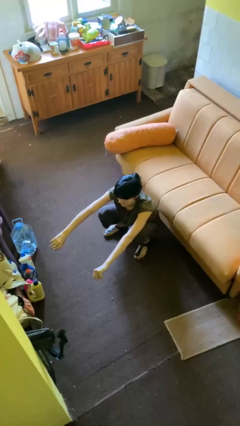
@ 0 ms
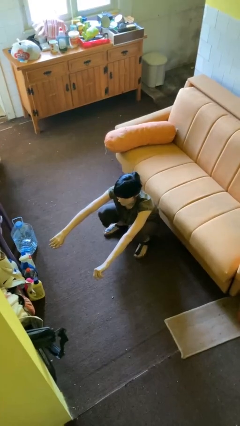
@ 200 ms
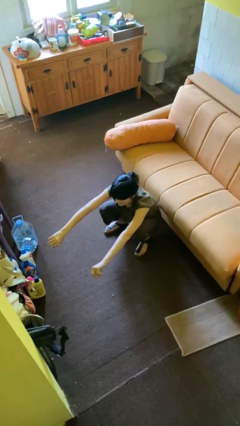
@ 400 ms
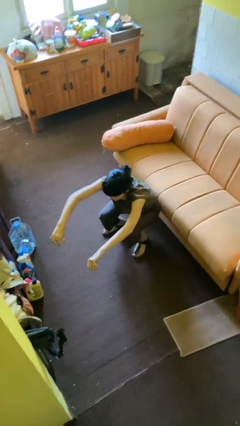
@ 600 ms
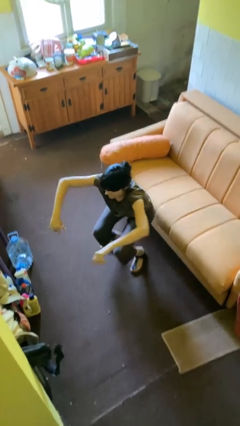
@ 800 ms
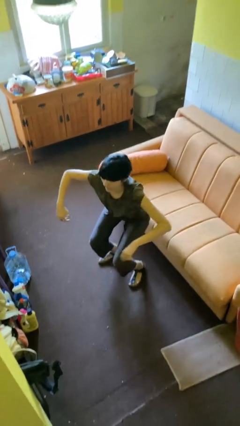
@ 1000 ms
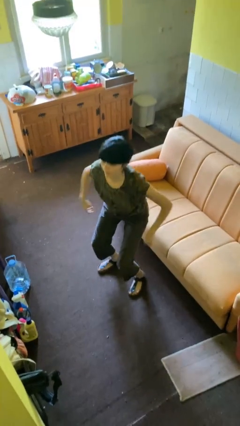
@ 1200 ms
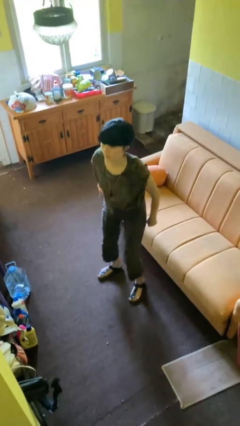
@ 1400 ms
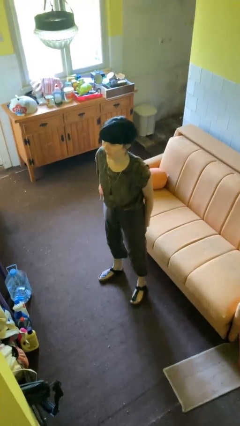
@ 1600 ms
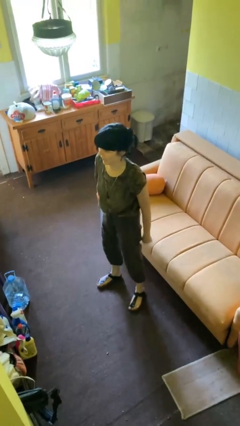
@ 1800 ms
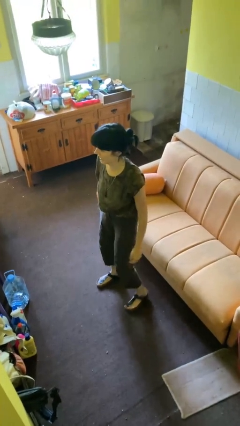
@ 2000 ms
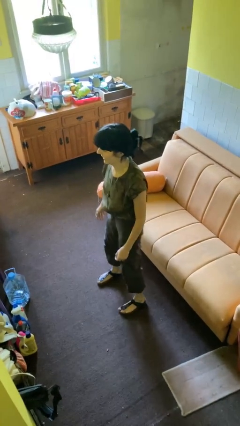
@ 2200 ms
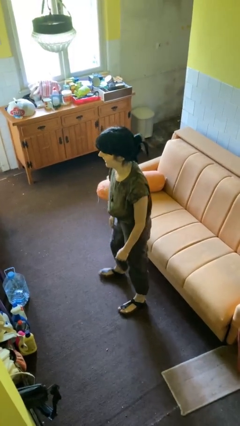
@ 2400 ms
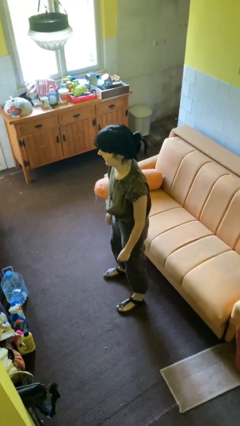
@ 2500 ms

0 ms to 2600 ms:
person stands up

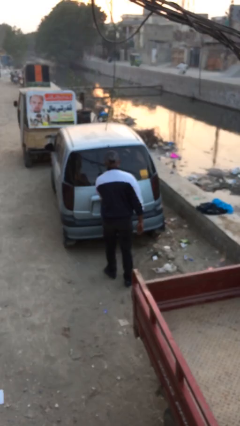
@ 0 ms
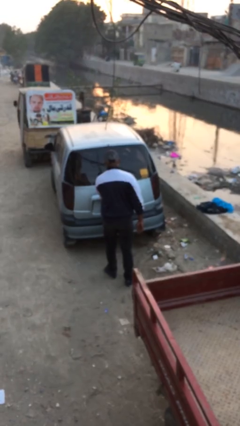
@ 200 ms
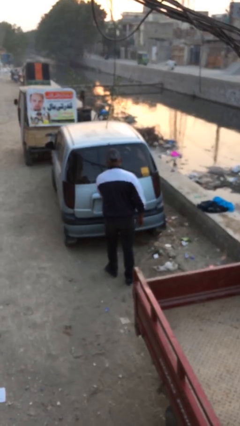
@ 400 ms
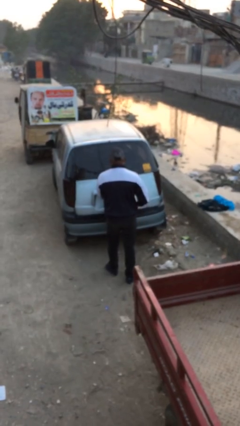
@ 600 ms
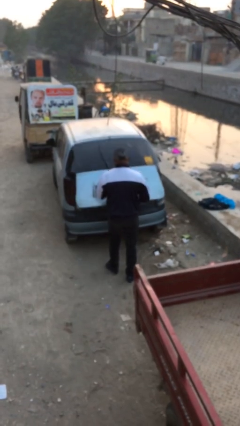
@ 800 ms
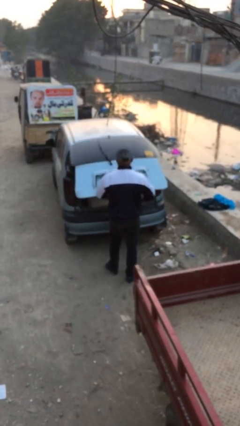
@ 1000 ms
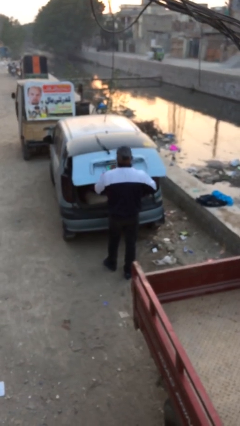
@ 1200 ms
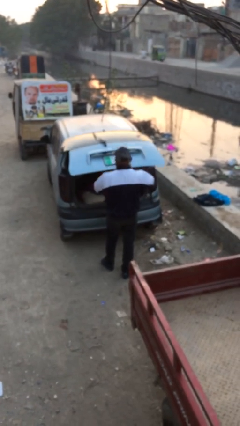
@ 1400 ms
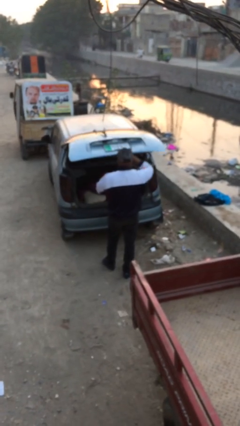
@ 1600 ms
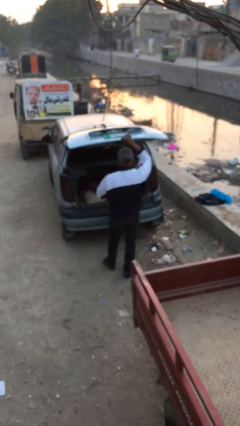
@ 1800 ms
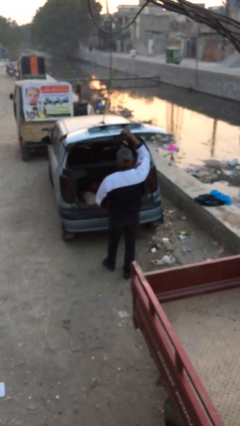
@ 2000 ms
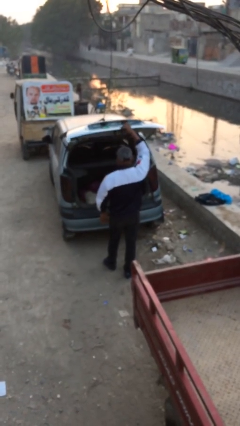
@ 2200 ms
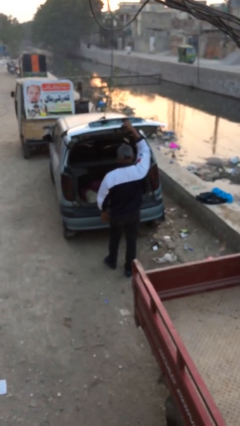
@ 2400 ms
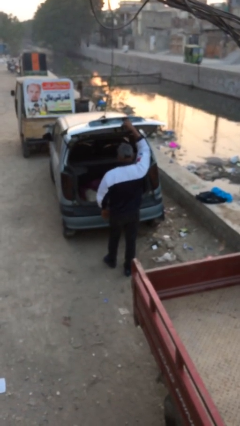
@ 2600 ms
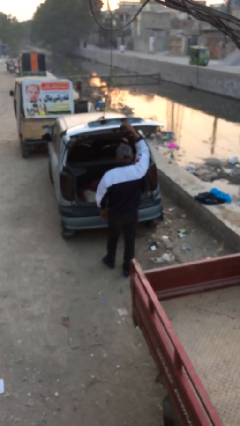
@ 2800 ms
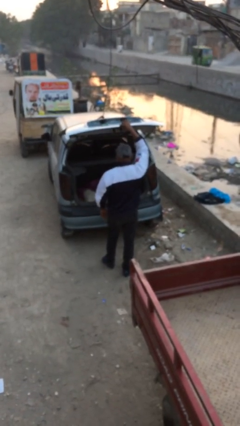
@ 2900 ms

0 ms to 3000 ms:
person opens car trunk

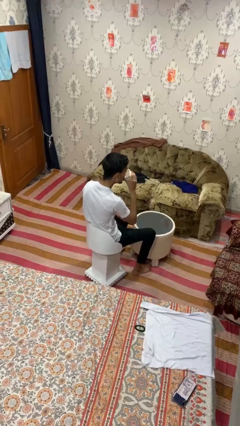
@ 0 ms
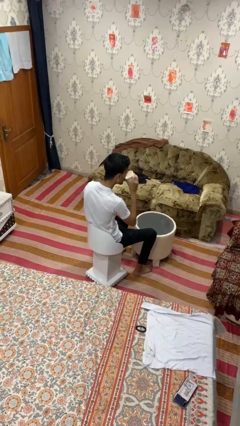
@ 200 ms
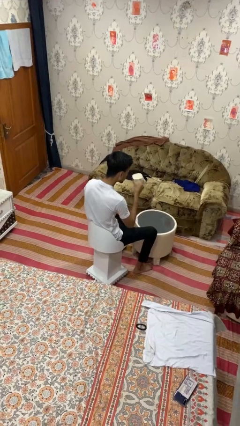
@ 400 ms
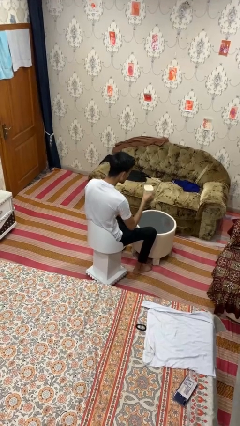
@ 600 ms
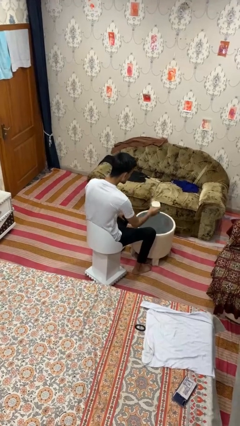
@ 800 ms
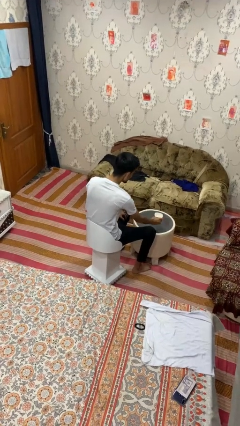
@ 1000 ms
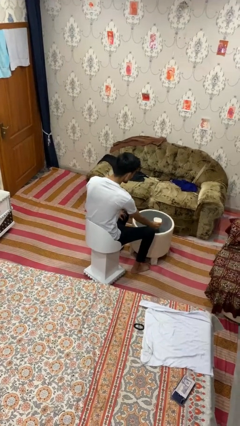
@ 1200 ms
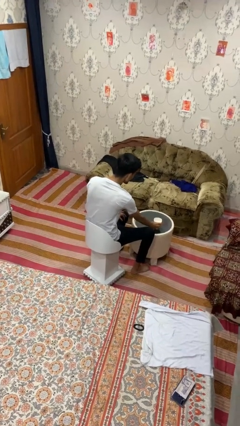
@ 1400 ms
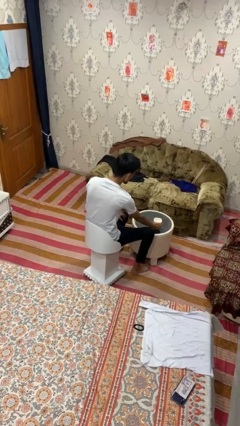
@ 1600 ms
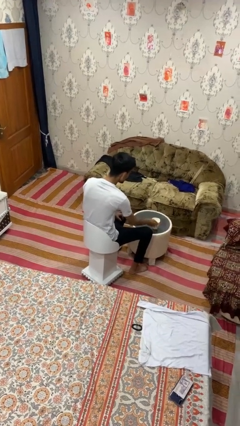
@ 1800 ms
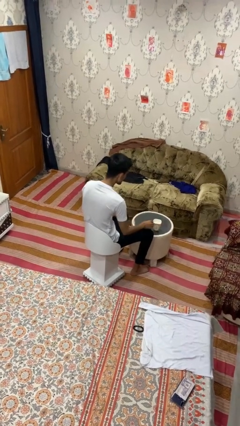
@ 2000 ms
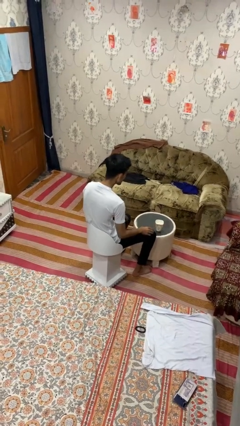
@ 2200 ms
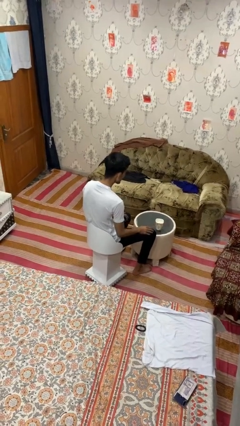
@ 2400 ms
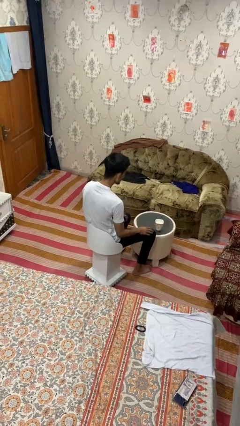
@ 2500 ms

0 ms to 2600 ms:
person puts down object on table

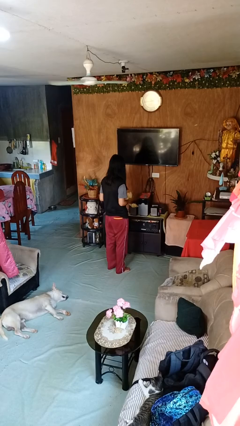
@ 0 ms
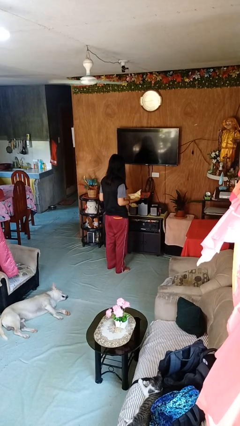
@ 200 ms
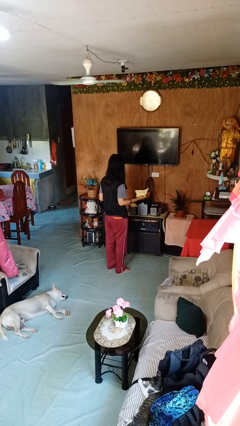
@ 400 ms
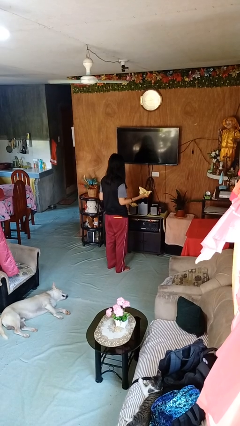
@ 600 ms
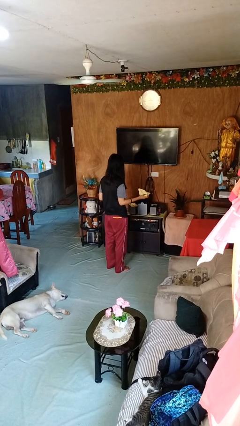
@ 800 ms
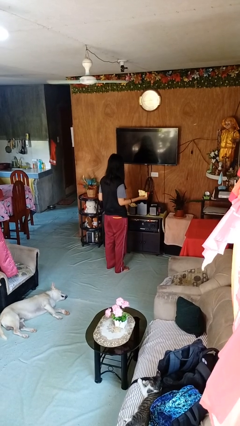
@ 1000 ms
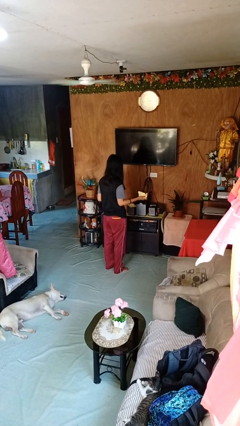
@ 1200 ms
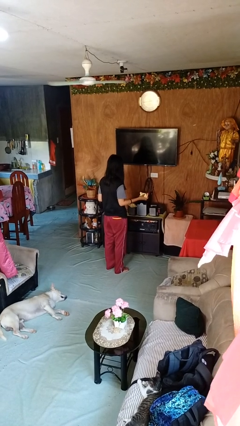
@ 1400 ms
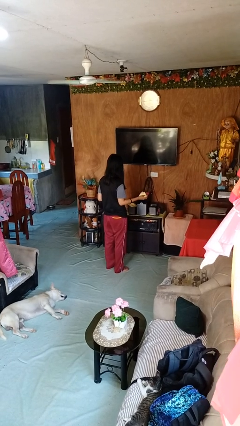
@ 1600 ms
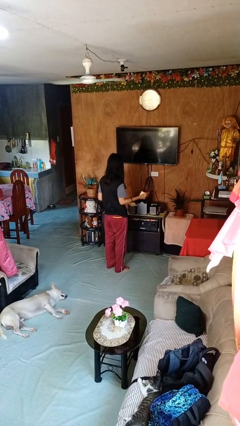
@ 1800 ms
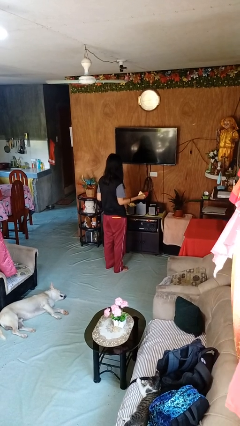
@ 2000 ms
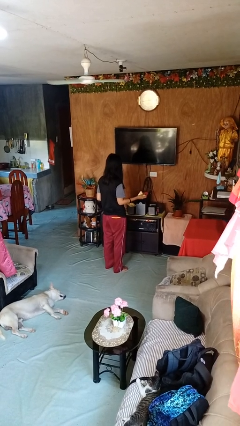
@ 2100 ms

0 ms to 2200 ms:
person crumples paper

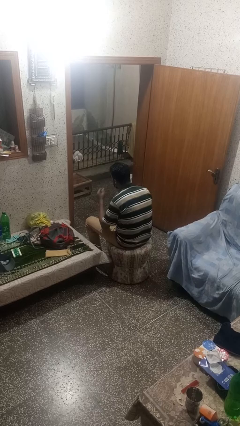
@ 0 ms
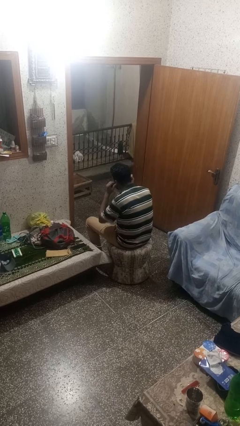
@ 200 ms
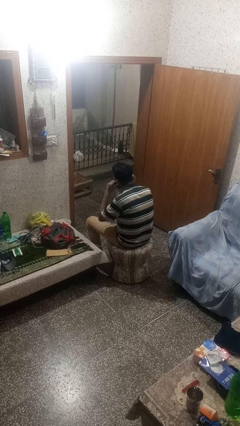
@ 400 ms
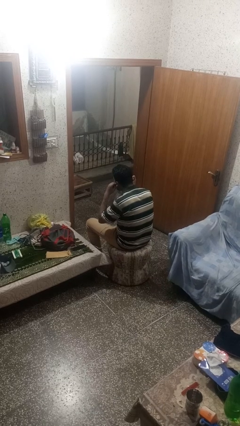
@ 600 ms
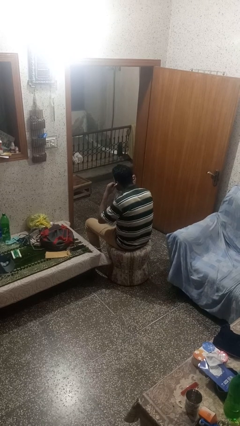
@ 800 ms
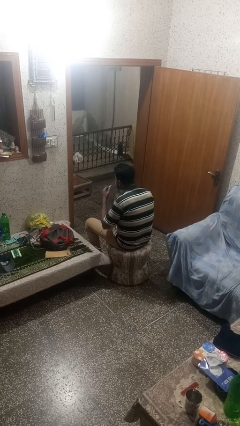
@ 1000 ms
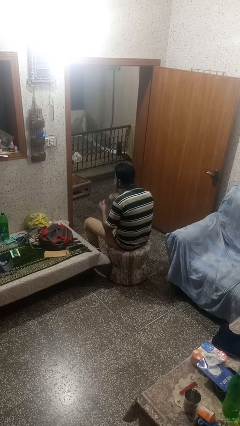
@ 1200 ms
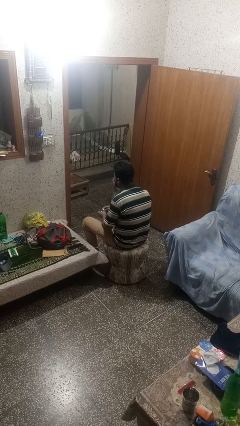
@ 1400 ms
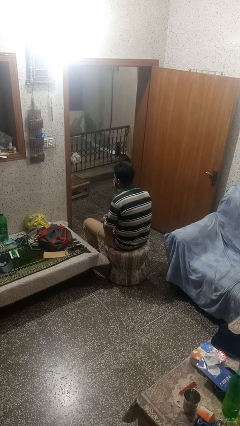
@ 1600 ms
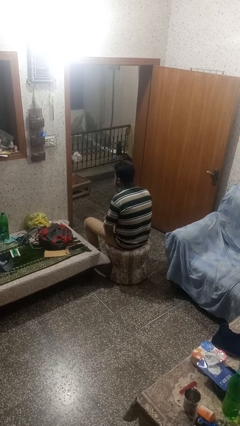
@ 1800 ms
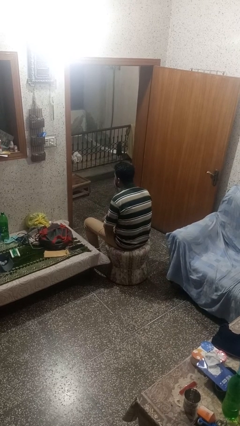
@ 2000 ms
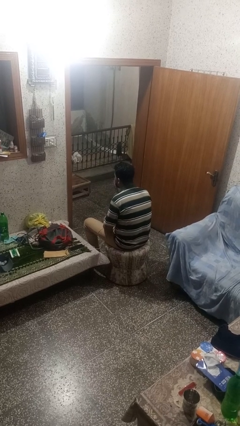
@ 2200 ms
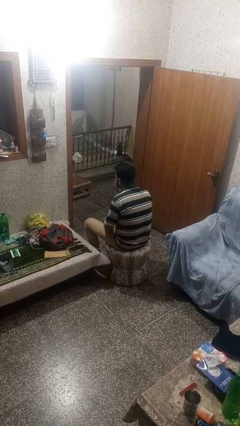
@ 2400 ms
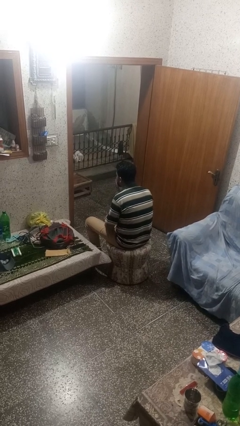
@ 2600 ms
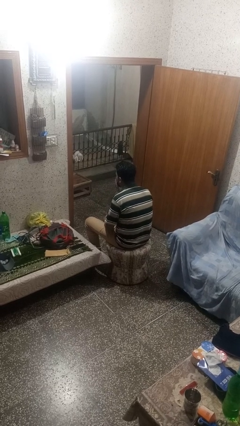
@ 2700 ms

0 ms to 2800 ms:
person takes off headphones

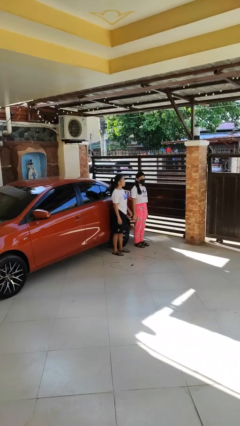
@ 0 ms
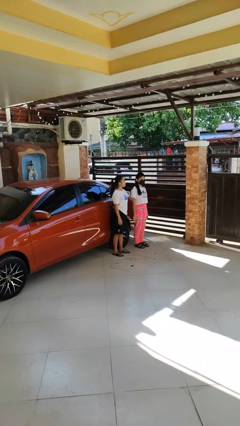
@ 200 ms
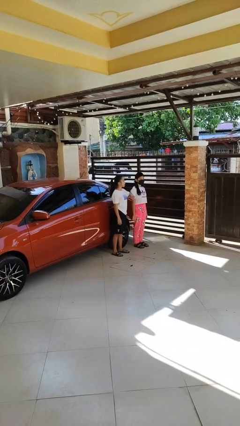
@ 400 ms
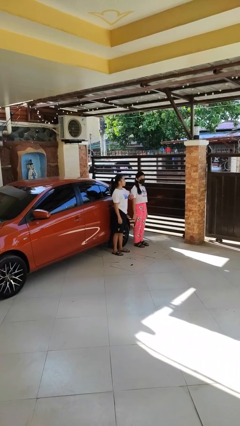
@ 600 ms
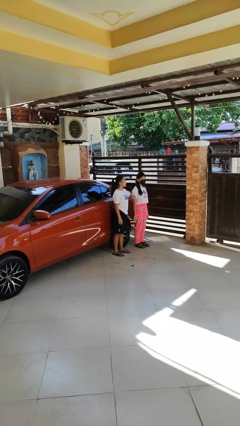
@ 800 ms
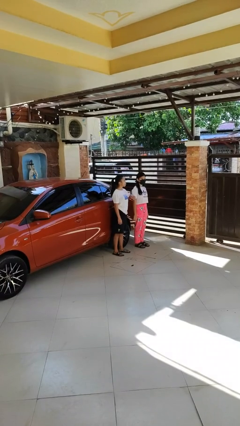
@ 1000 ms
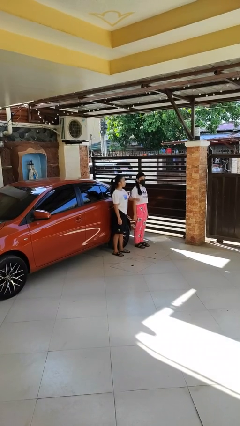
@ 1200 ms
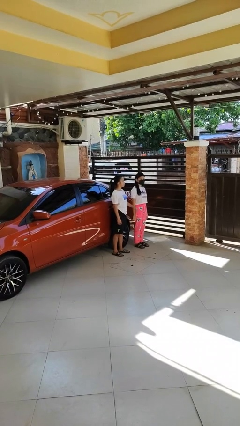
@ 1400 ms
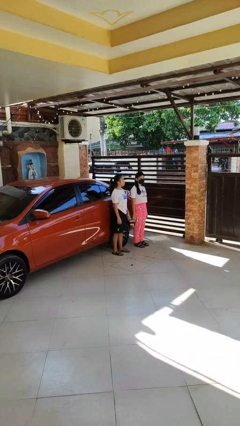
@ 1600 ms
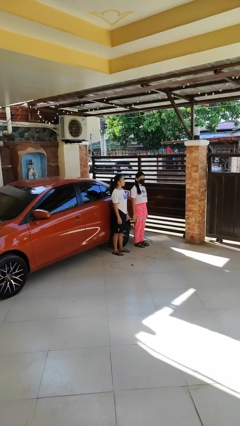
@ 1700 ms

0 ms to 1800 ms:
person nudges person with elbow

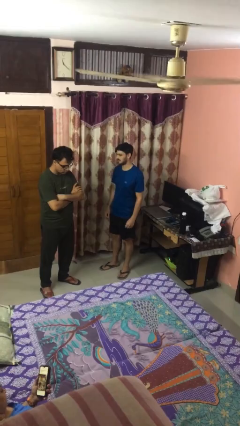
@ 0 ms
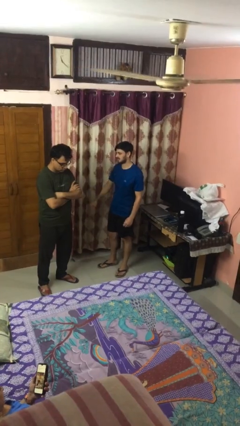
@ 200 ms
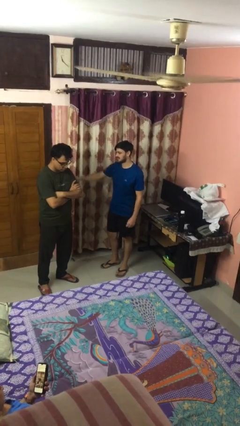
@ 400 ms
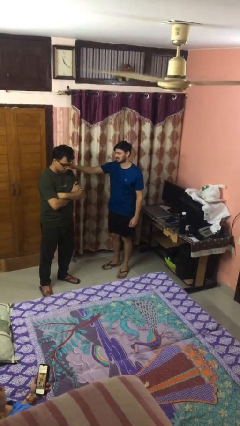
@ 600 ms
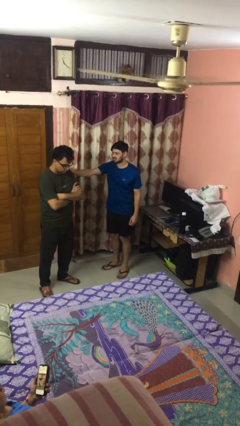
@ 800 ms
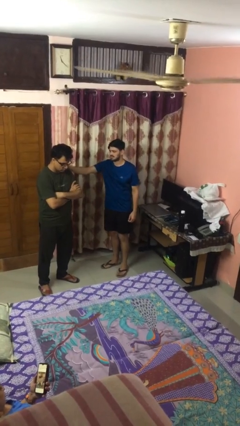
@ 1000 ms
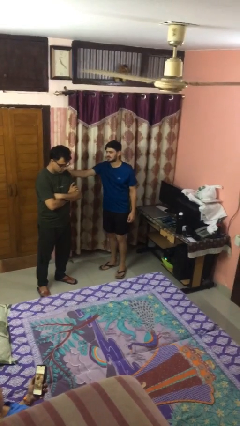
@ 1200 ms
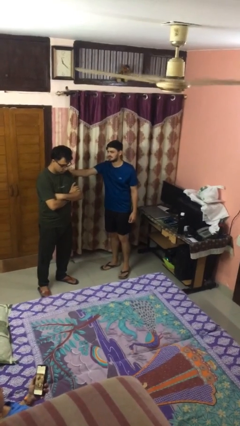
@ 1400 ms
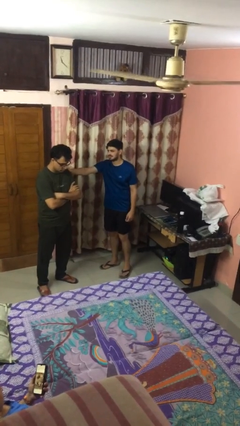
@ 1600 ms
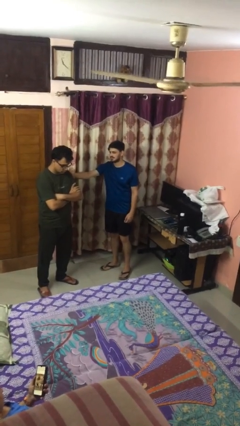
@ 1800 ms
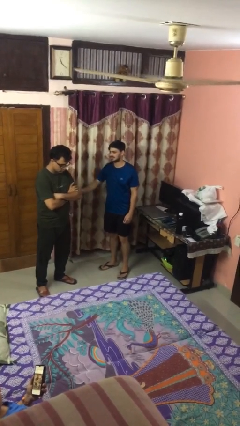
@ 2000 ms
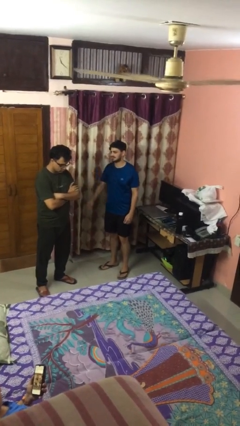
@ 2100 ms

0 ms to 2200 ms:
person pounds shoulders of person
